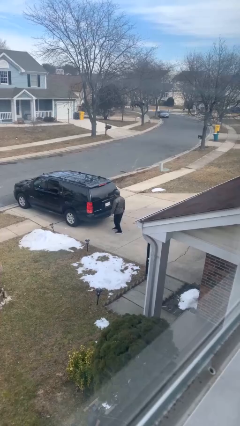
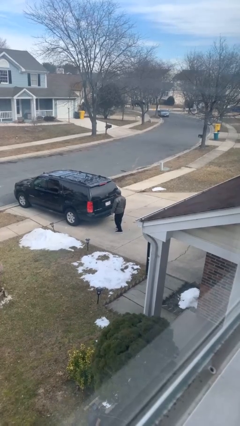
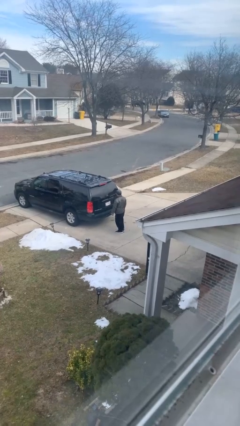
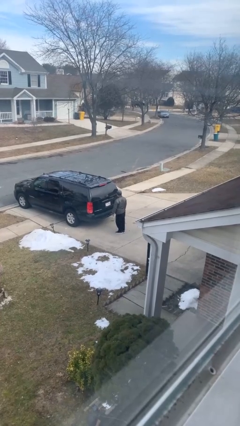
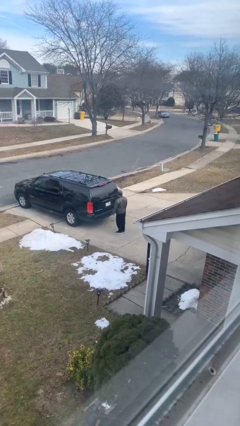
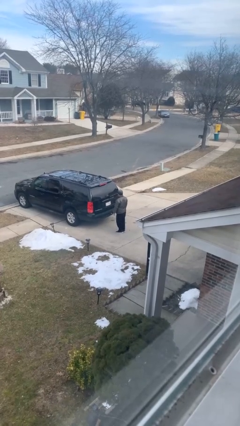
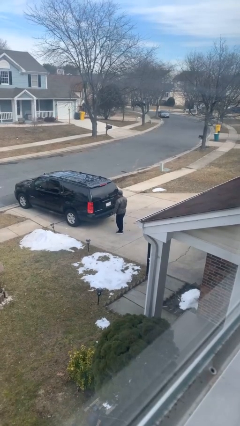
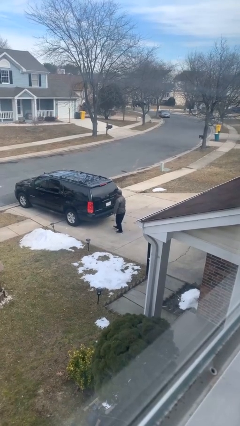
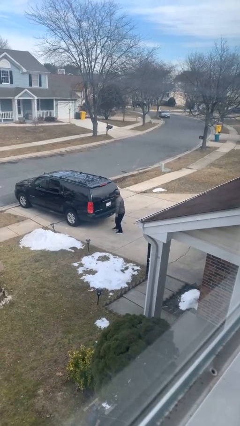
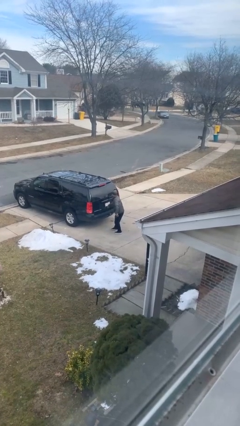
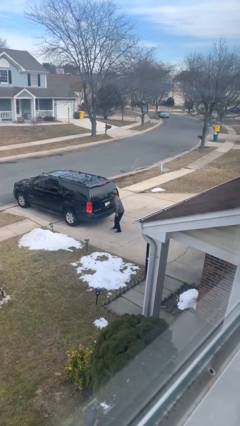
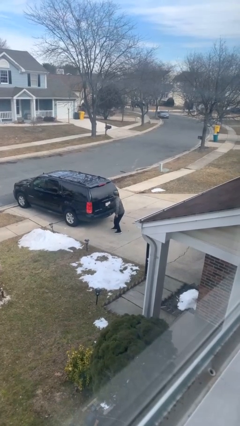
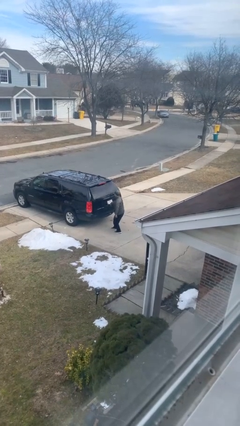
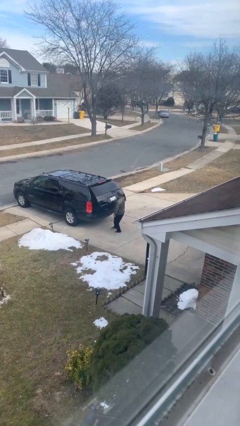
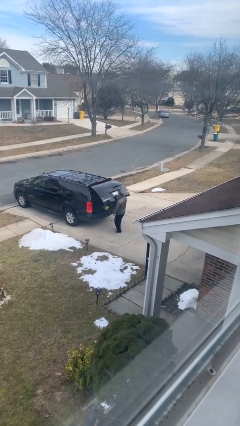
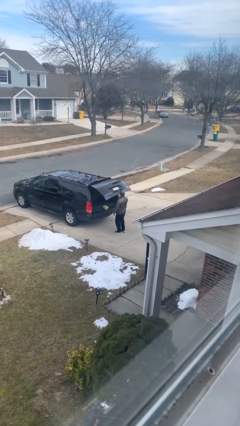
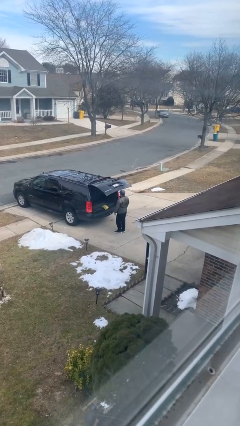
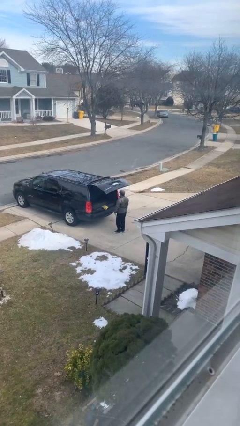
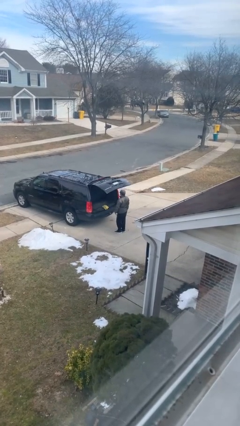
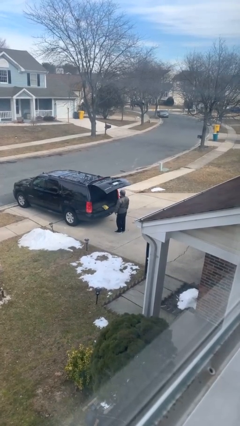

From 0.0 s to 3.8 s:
person opens car trunk

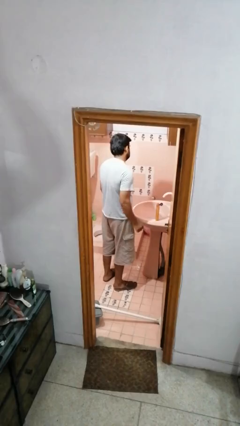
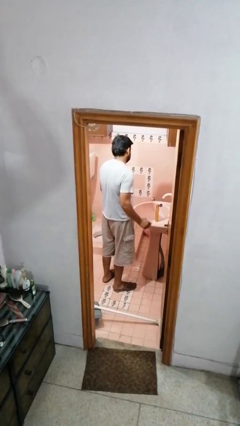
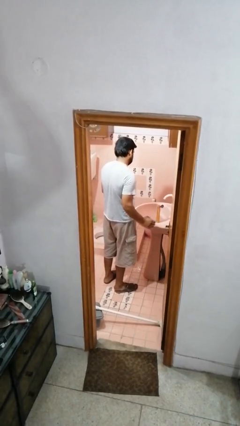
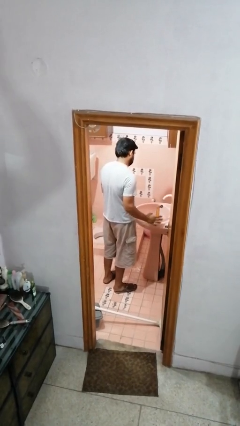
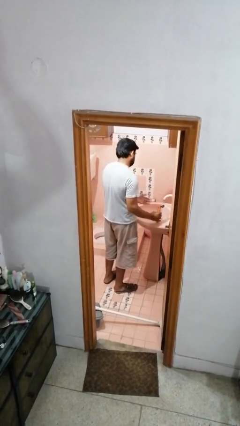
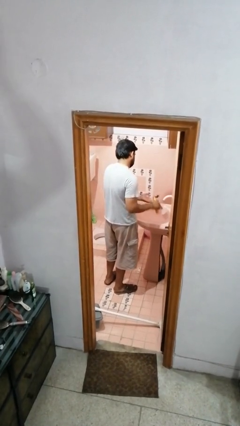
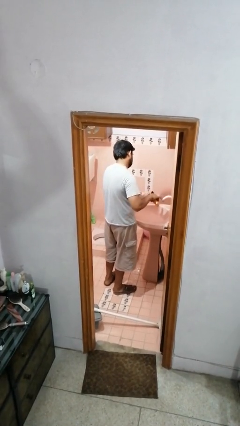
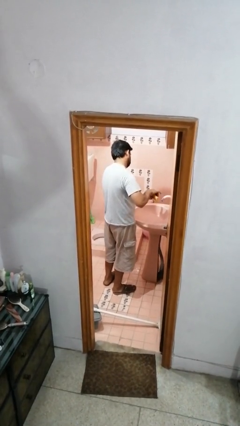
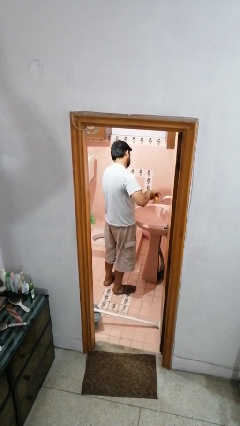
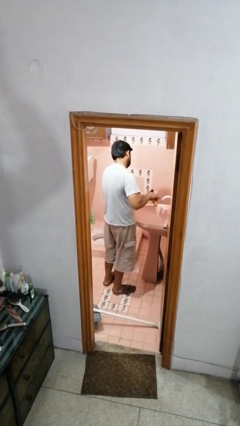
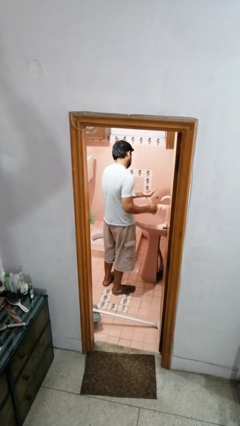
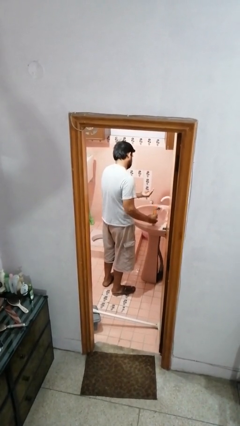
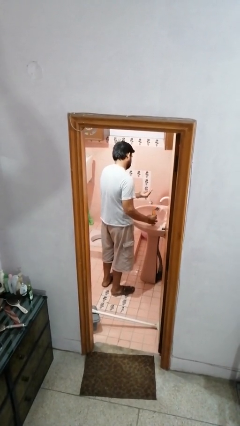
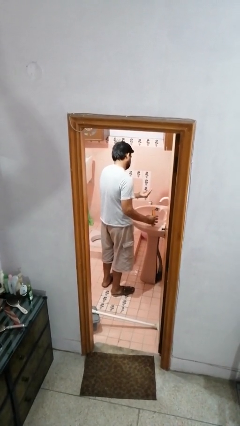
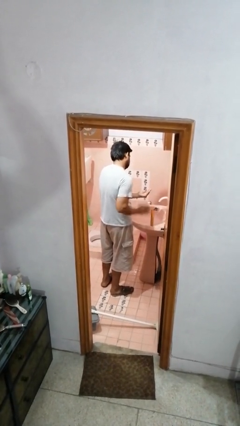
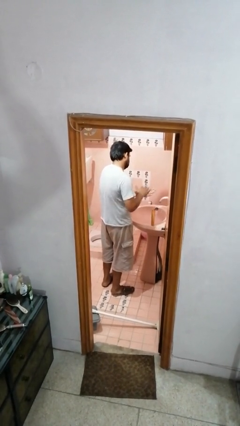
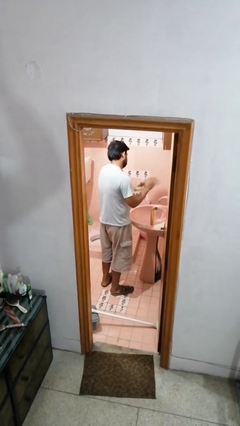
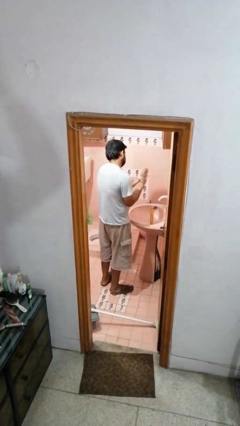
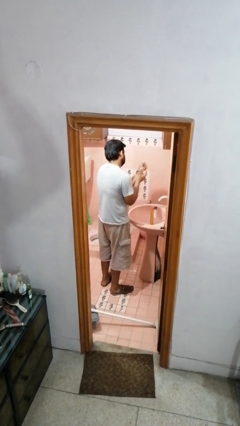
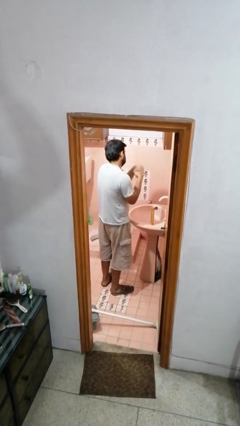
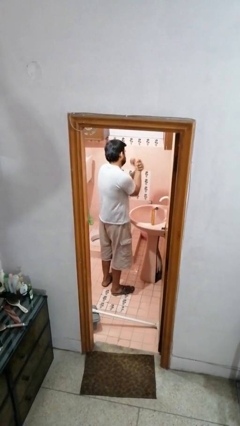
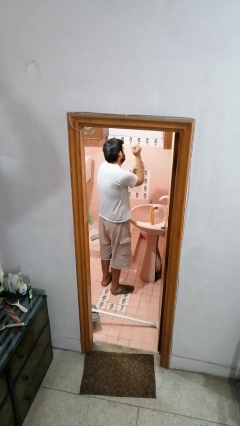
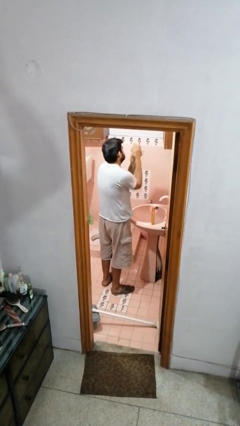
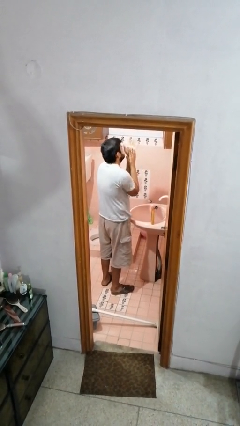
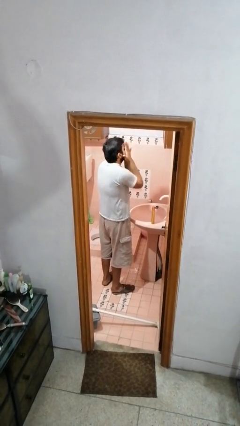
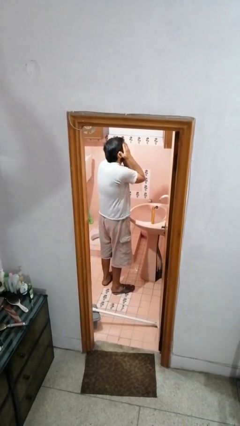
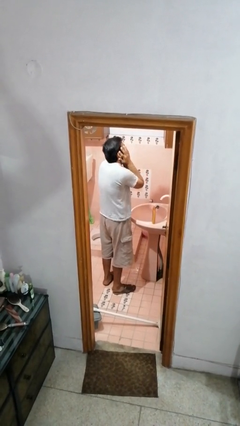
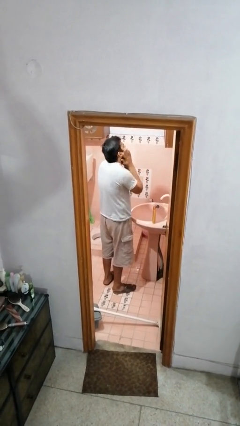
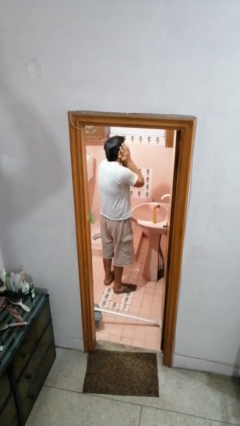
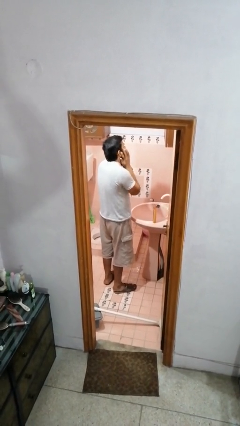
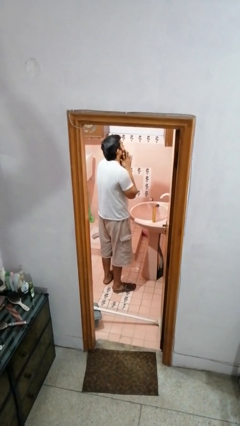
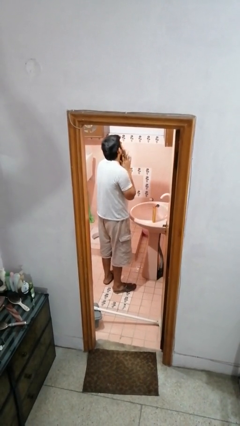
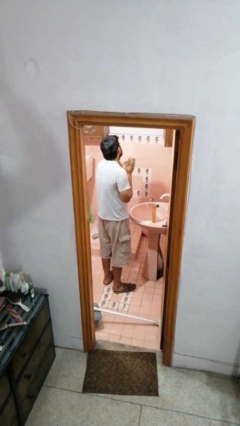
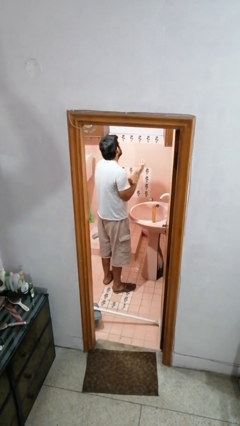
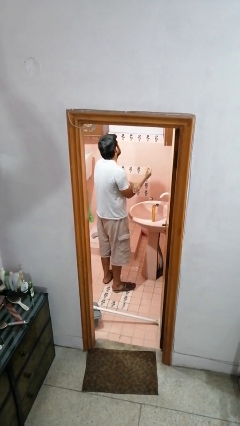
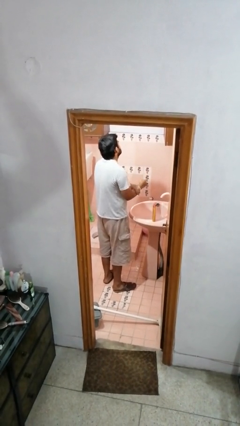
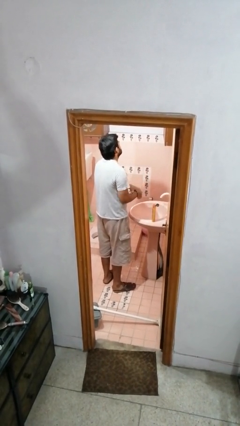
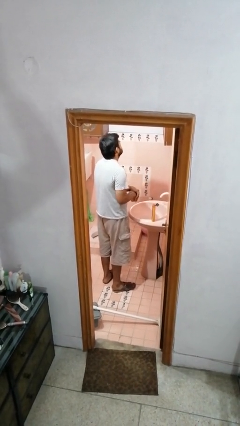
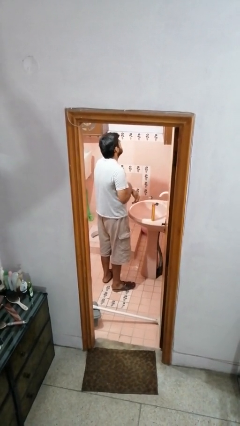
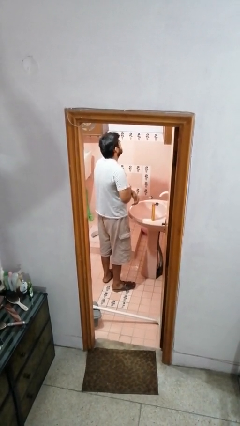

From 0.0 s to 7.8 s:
person applies facial moisturizer

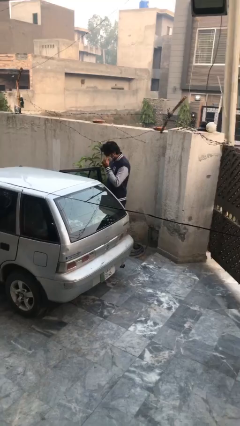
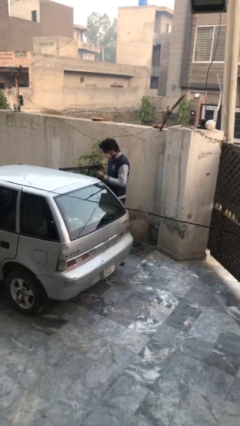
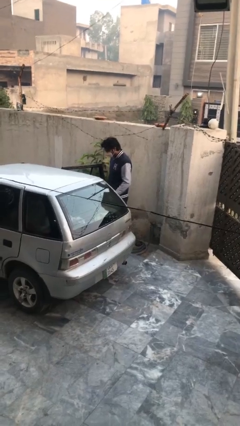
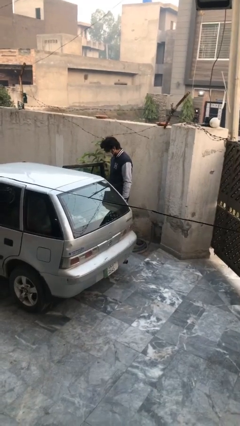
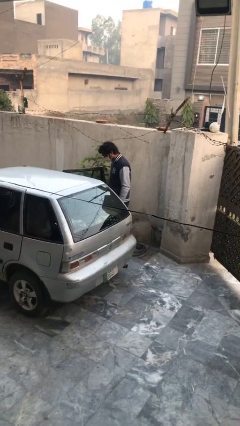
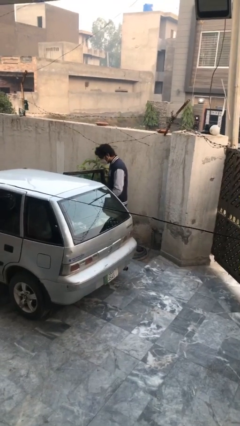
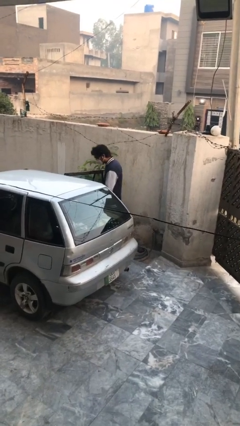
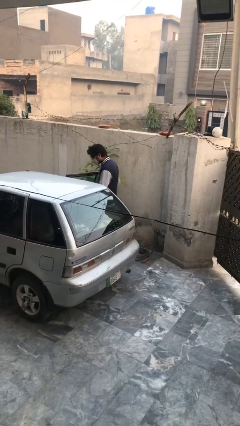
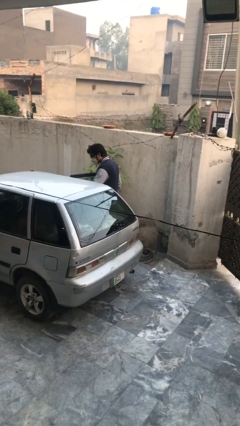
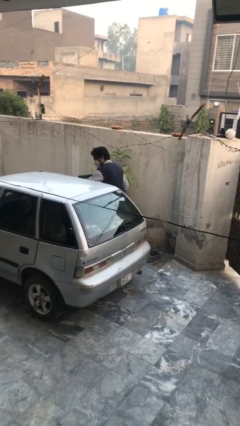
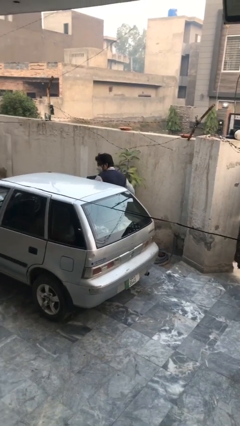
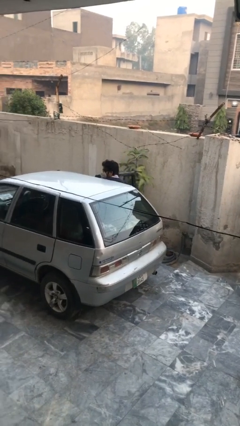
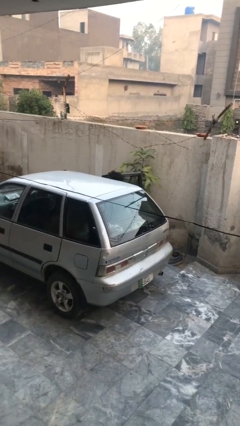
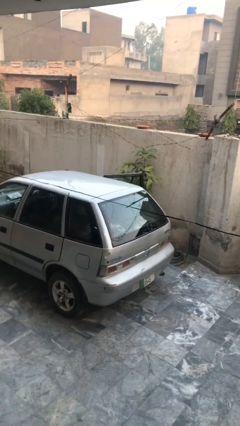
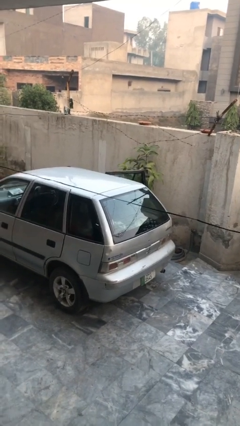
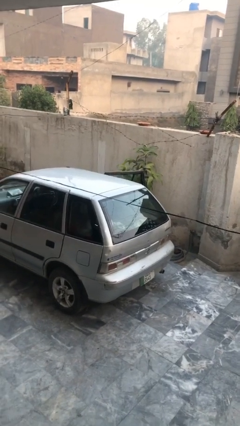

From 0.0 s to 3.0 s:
person enters car

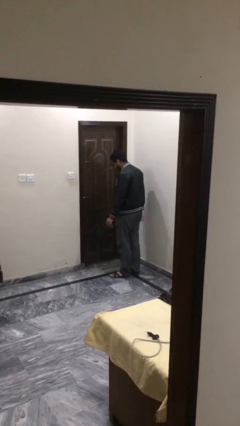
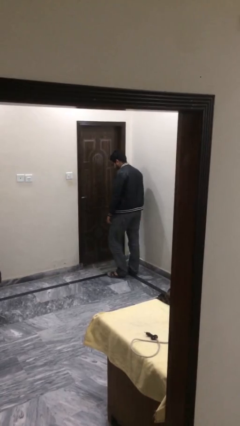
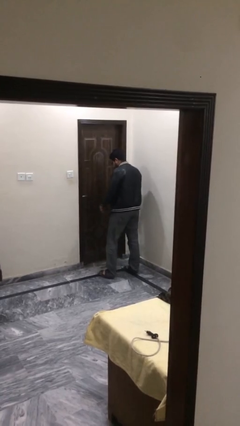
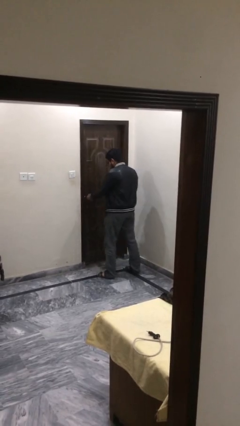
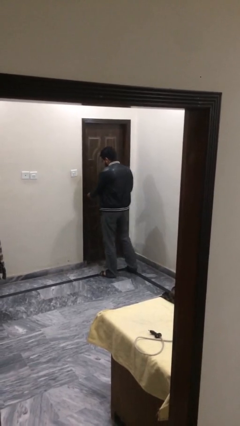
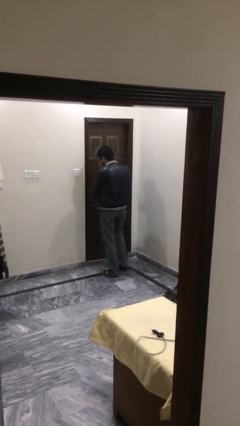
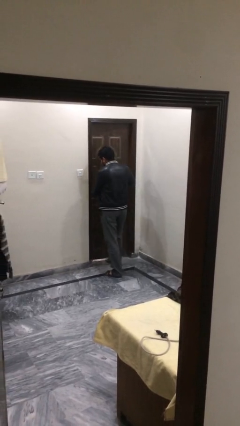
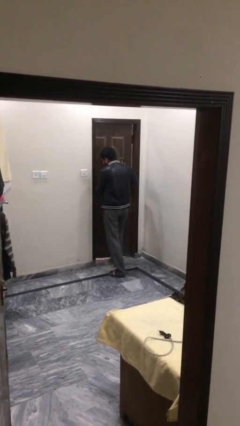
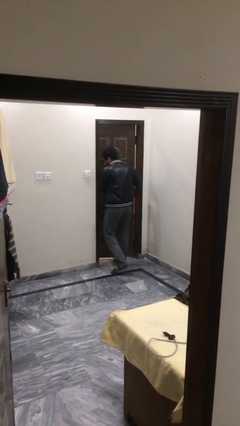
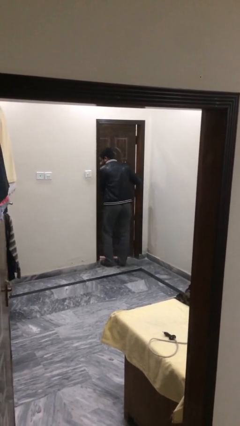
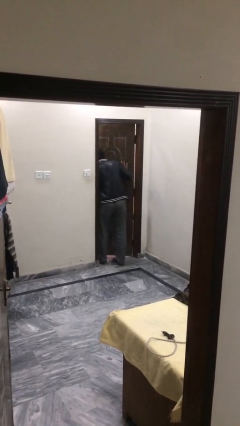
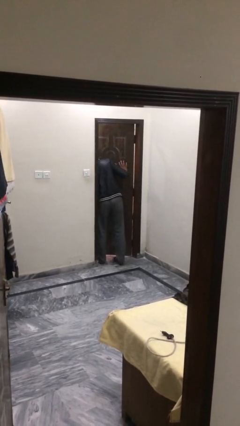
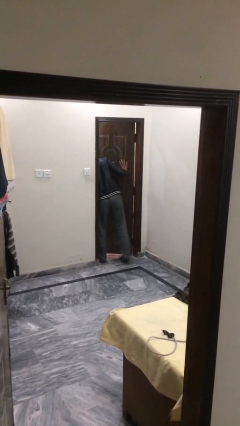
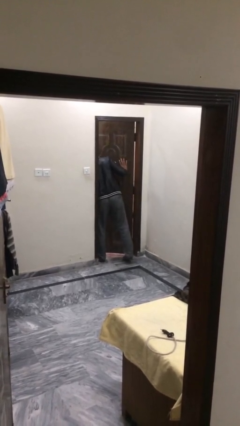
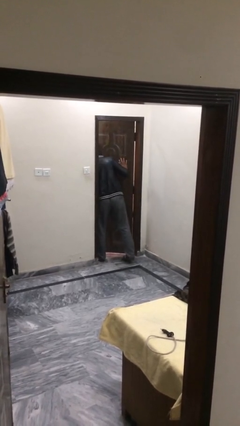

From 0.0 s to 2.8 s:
person opens facility door
